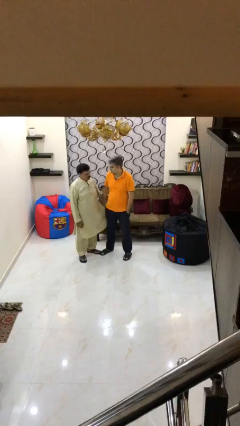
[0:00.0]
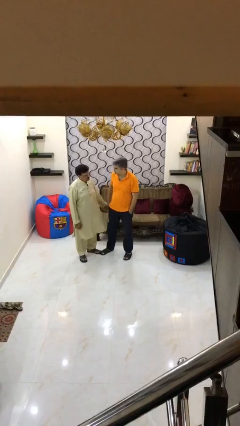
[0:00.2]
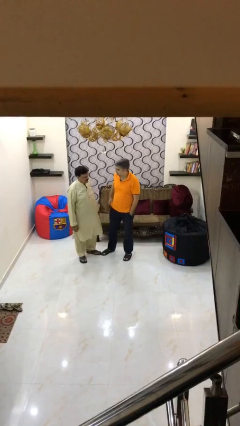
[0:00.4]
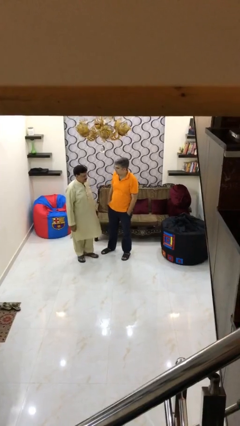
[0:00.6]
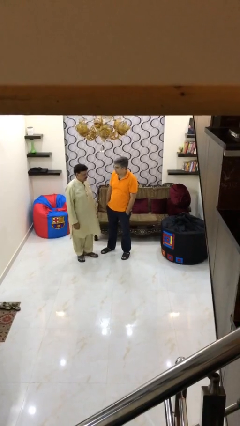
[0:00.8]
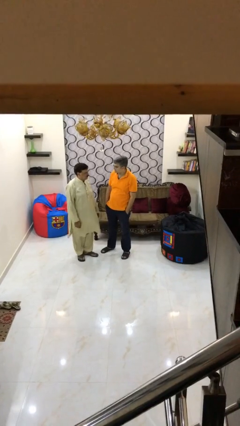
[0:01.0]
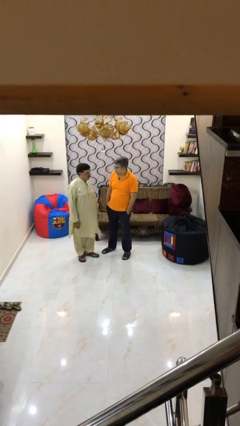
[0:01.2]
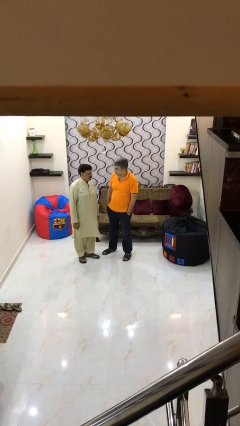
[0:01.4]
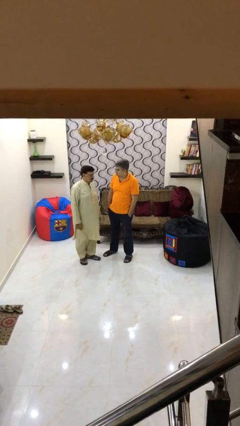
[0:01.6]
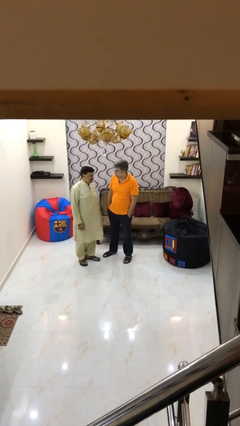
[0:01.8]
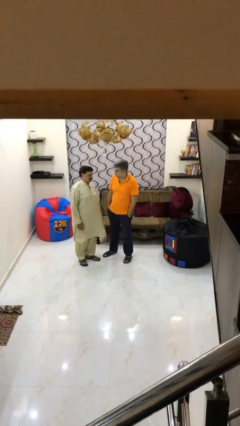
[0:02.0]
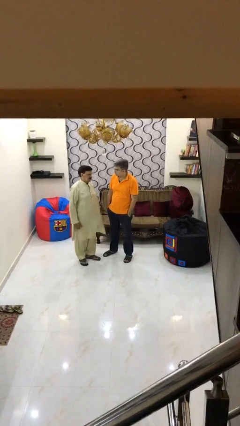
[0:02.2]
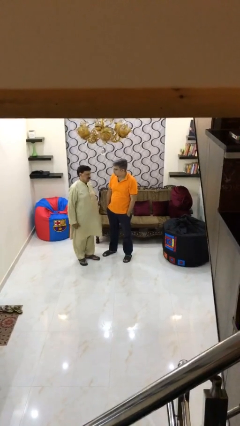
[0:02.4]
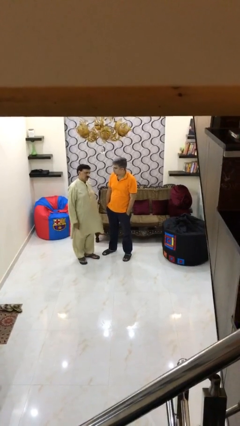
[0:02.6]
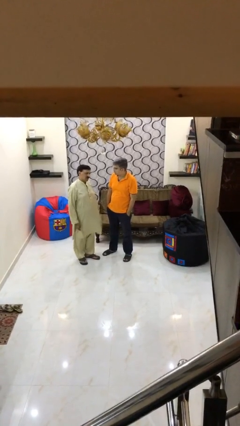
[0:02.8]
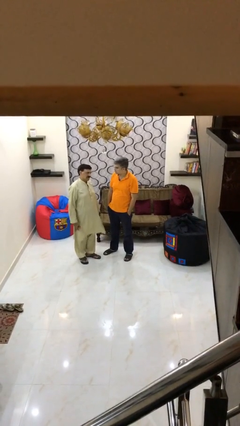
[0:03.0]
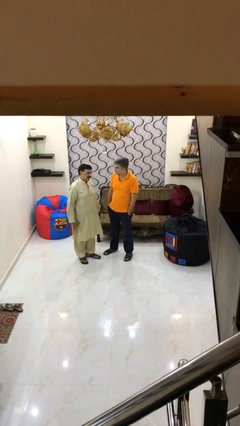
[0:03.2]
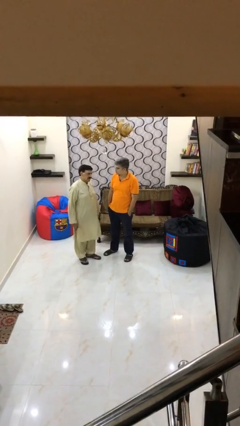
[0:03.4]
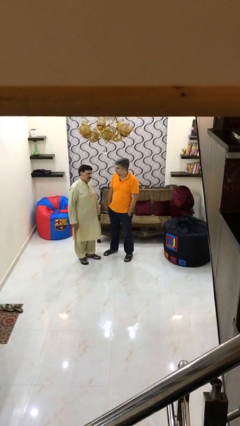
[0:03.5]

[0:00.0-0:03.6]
person talks to person

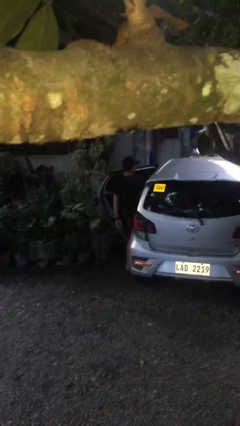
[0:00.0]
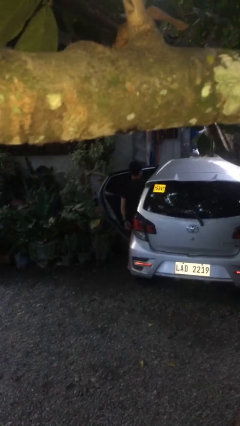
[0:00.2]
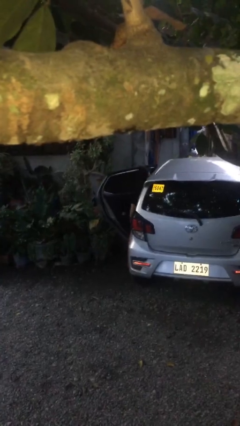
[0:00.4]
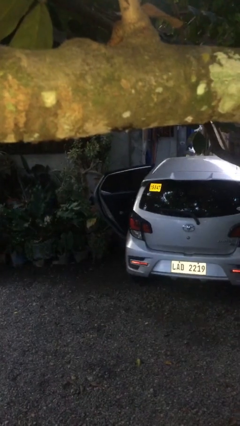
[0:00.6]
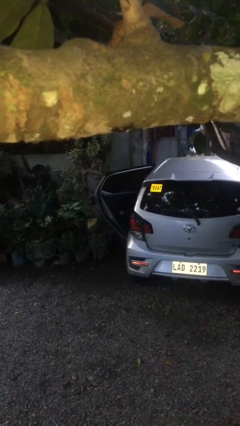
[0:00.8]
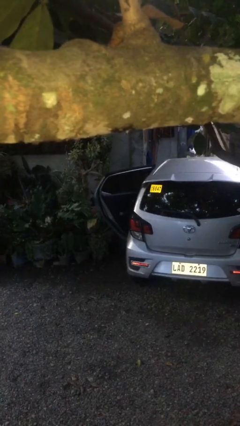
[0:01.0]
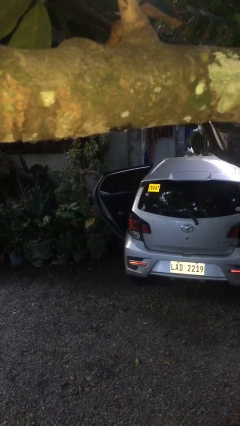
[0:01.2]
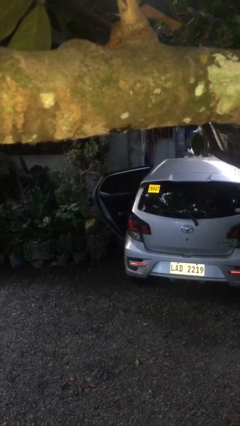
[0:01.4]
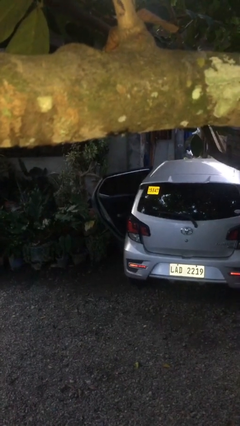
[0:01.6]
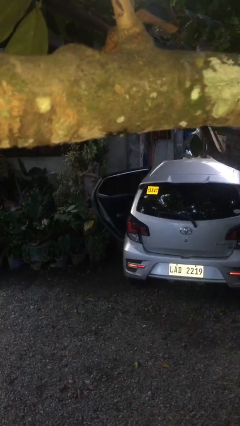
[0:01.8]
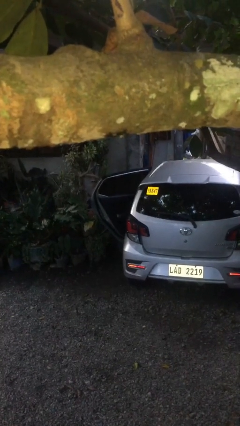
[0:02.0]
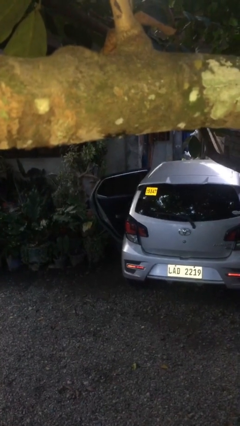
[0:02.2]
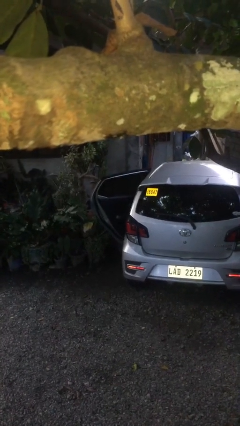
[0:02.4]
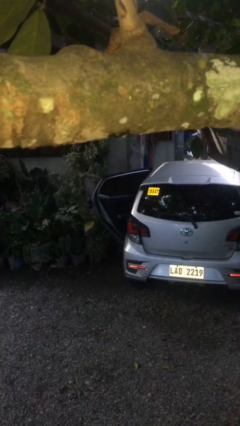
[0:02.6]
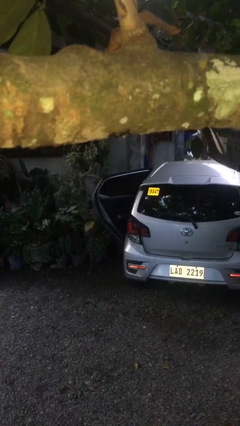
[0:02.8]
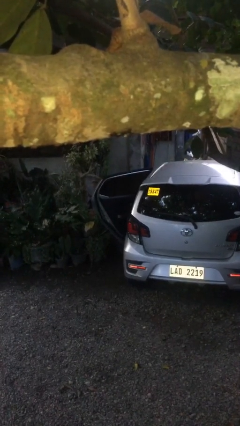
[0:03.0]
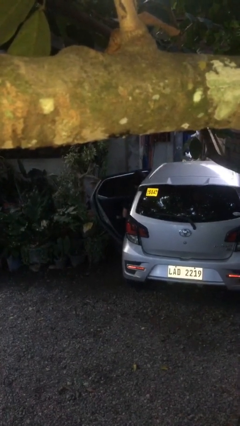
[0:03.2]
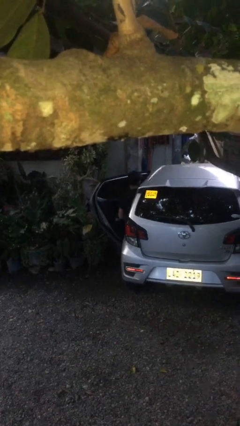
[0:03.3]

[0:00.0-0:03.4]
person enters car

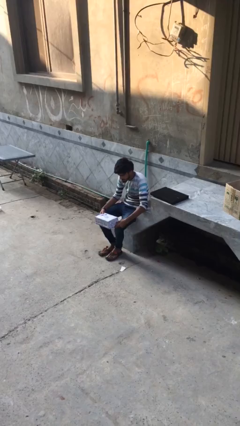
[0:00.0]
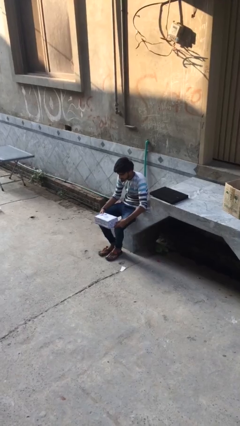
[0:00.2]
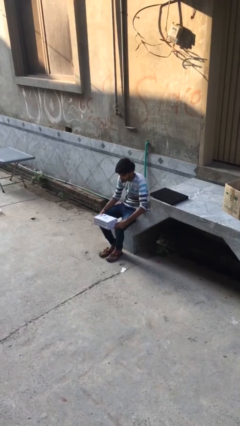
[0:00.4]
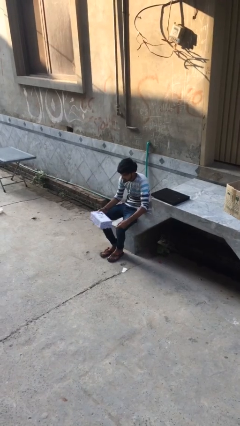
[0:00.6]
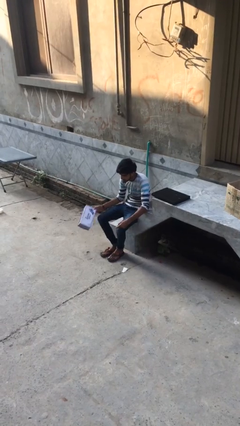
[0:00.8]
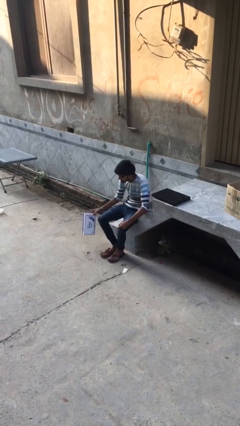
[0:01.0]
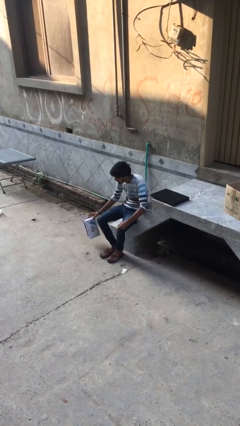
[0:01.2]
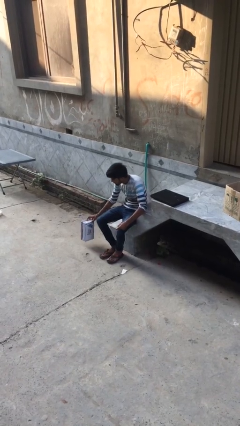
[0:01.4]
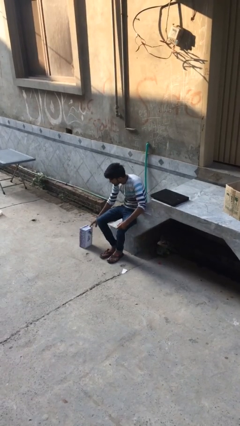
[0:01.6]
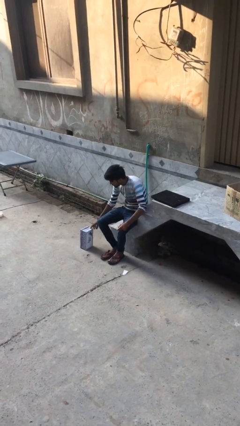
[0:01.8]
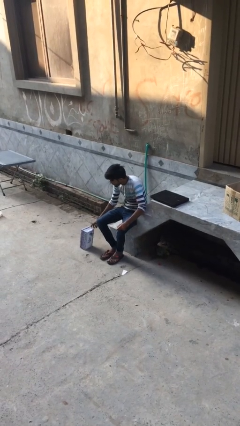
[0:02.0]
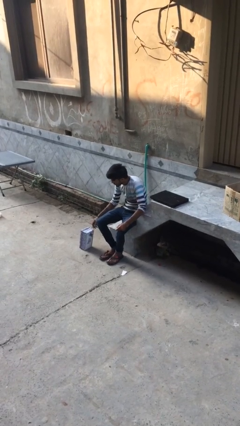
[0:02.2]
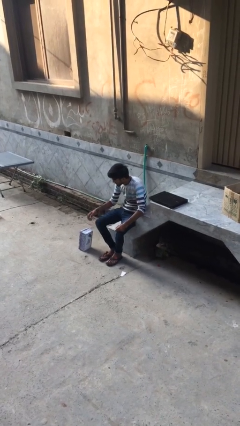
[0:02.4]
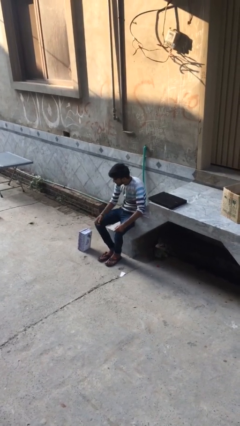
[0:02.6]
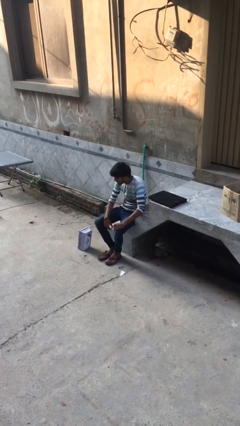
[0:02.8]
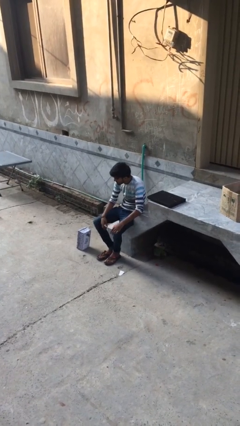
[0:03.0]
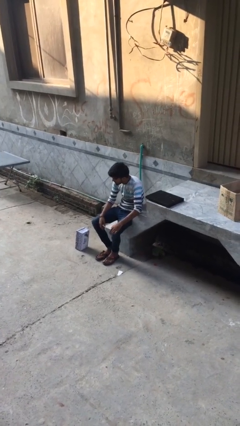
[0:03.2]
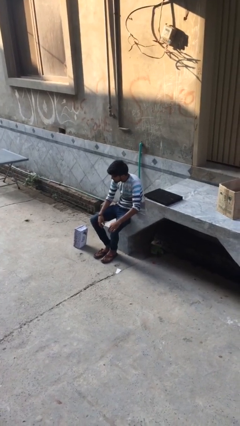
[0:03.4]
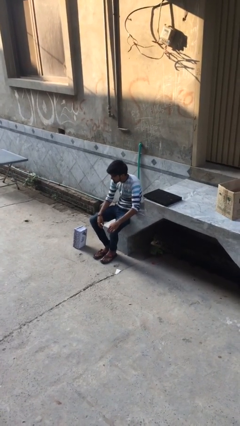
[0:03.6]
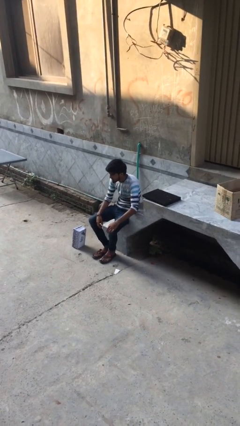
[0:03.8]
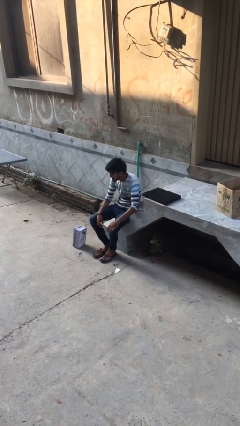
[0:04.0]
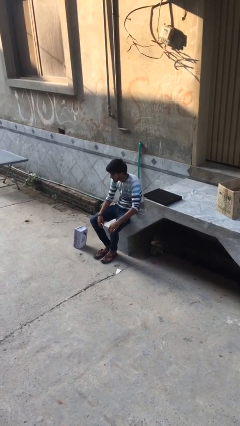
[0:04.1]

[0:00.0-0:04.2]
person puts down object on floor

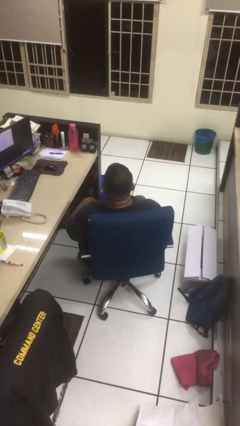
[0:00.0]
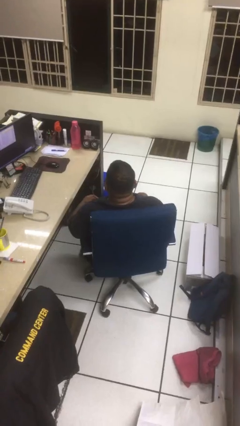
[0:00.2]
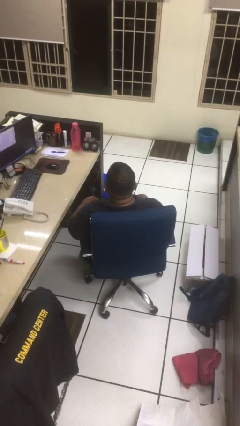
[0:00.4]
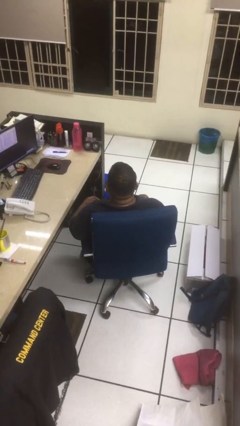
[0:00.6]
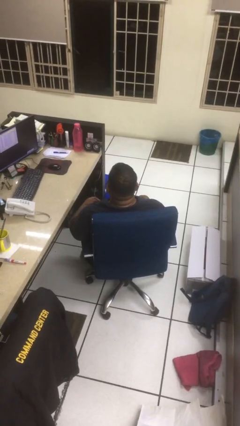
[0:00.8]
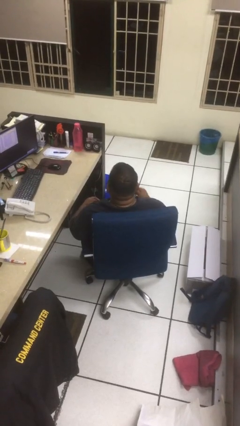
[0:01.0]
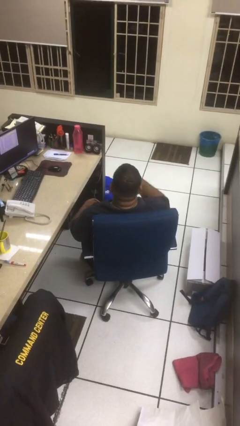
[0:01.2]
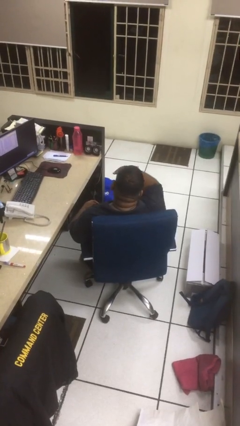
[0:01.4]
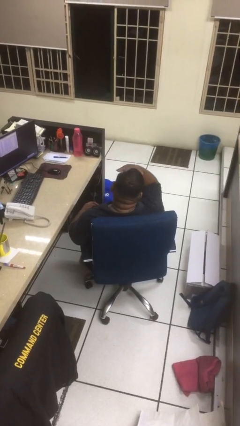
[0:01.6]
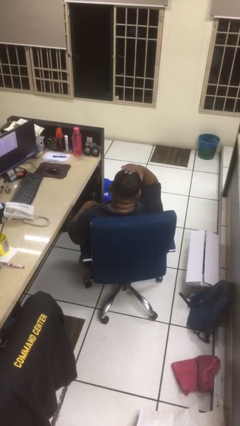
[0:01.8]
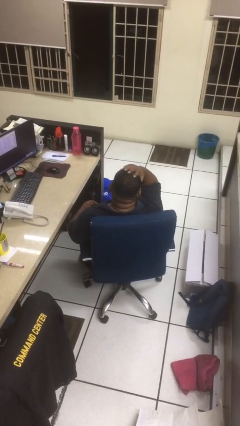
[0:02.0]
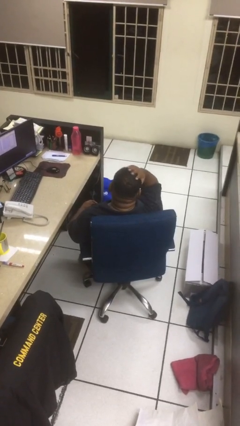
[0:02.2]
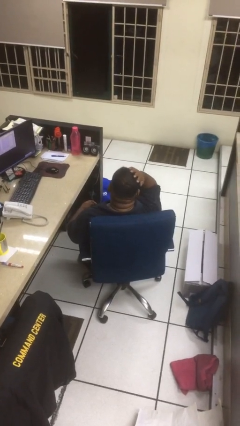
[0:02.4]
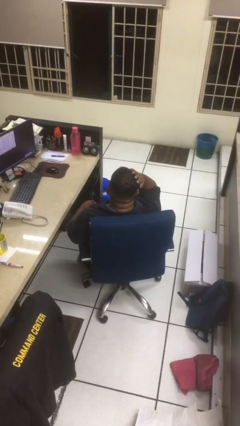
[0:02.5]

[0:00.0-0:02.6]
person strokes hair

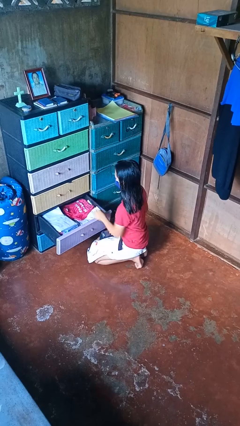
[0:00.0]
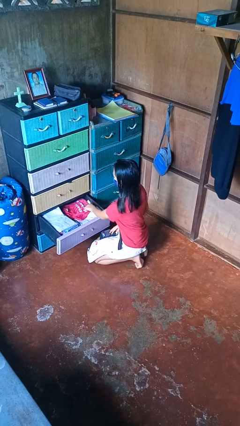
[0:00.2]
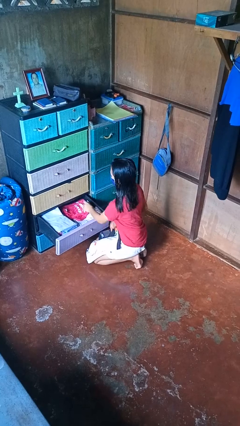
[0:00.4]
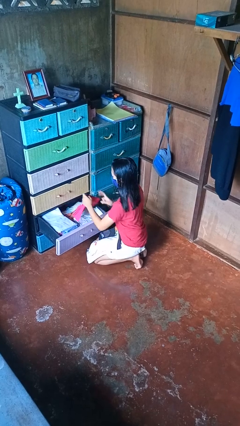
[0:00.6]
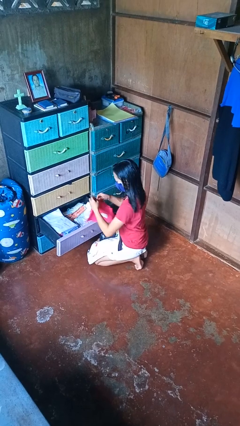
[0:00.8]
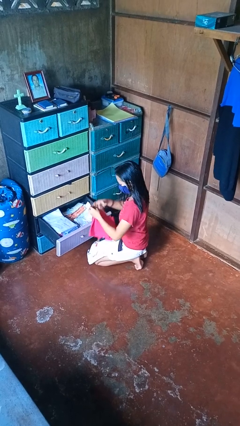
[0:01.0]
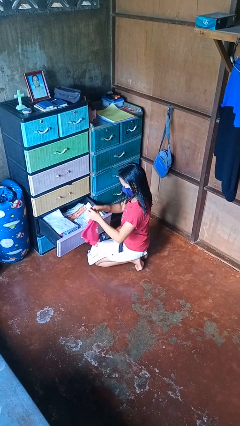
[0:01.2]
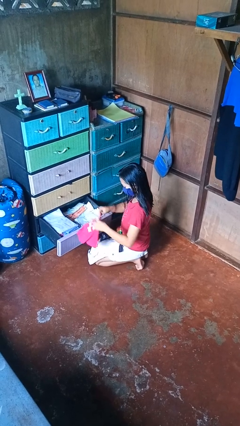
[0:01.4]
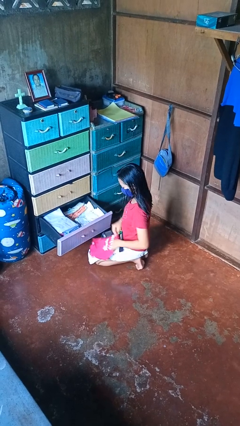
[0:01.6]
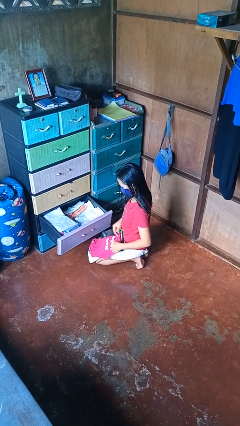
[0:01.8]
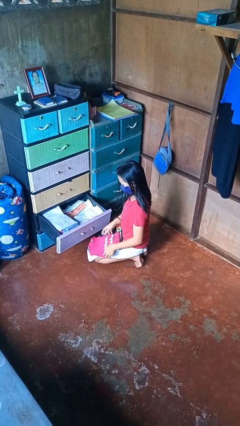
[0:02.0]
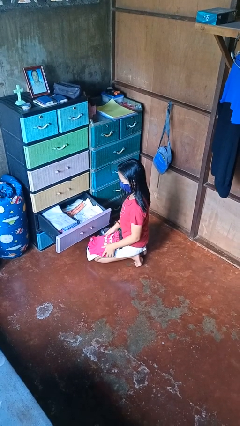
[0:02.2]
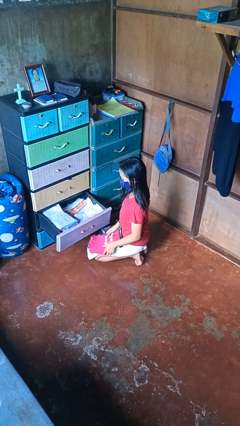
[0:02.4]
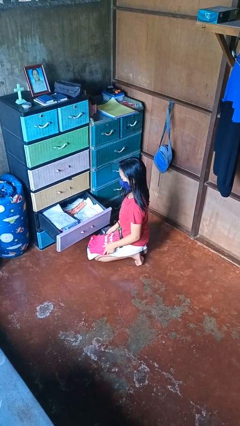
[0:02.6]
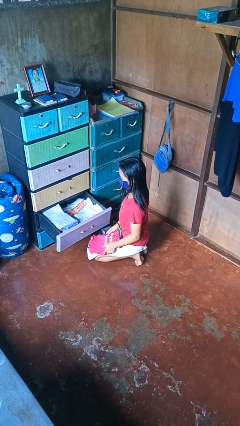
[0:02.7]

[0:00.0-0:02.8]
person takes clothes from dresser

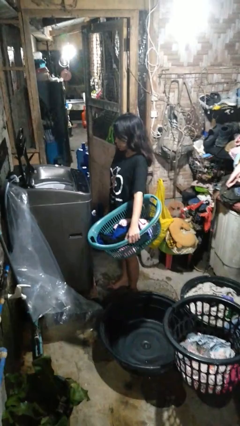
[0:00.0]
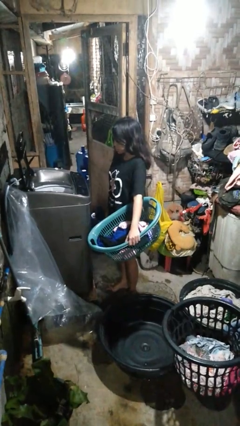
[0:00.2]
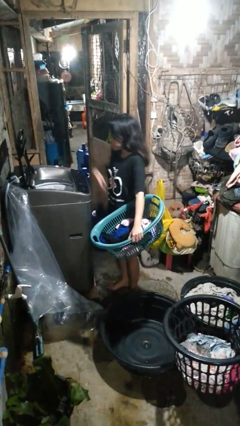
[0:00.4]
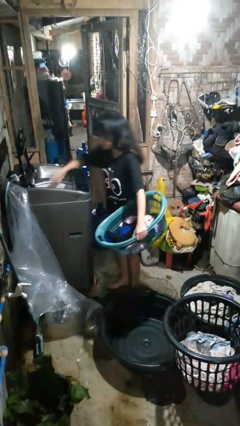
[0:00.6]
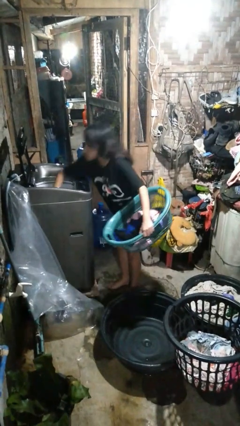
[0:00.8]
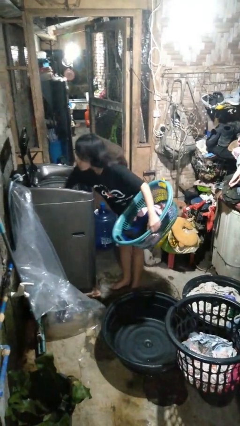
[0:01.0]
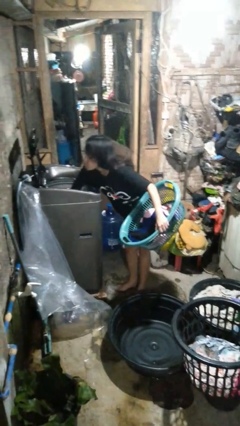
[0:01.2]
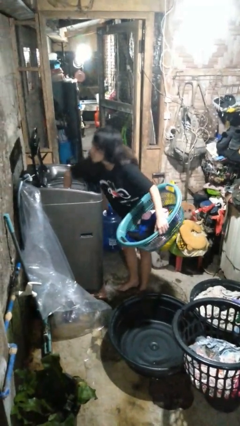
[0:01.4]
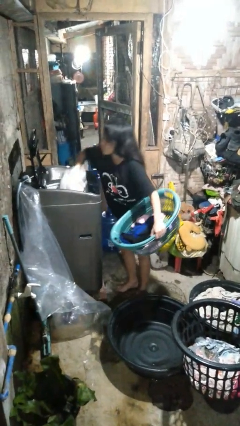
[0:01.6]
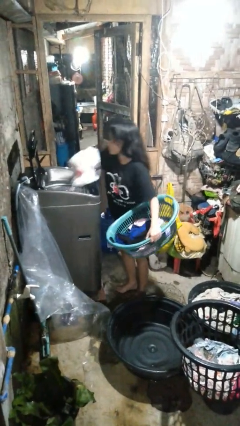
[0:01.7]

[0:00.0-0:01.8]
person loads clotheswasher
